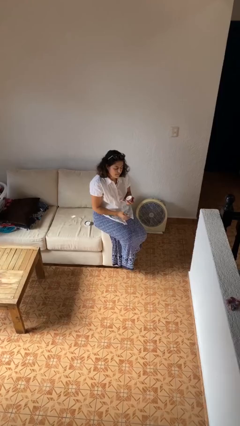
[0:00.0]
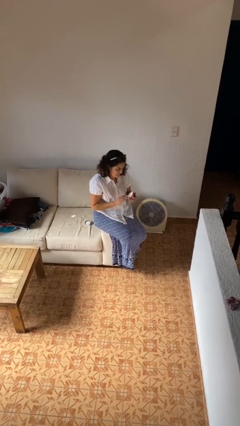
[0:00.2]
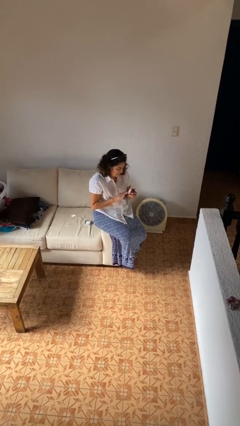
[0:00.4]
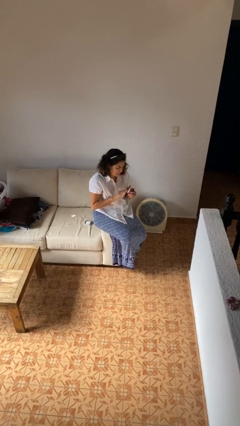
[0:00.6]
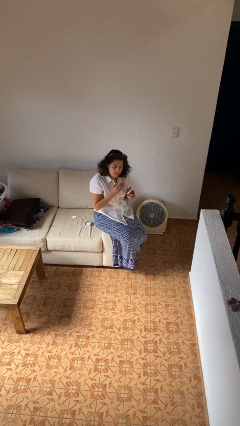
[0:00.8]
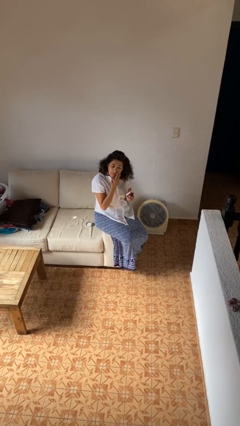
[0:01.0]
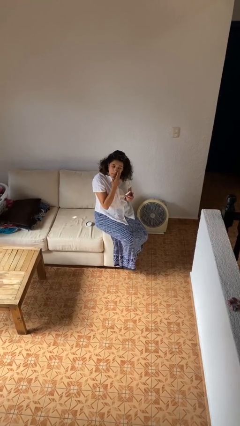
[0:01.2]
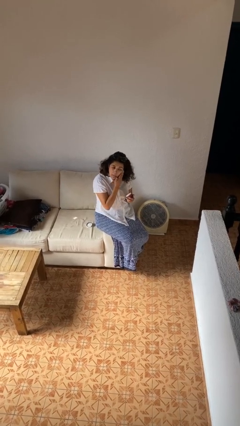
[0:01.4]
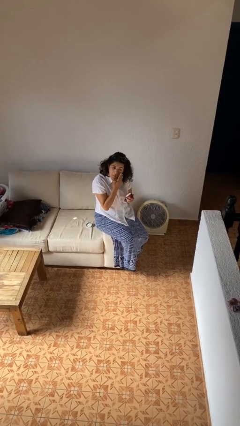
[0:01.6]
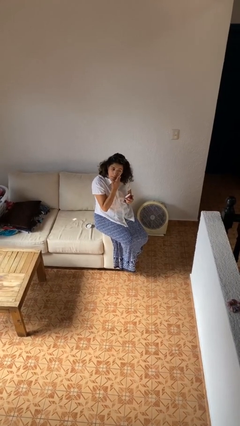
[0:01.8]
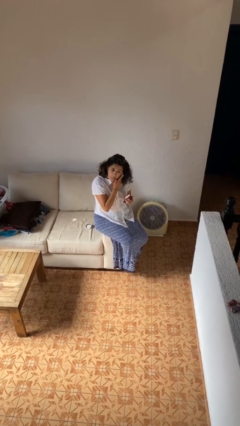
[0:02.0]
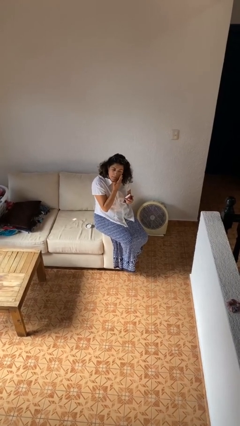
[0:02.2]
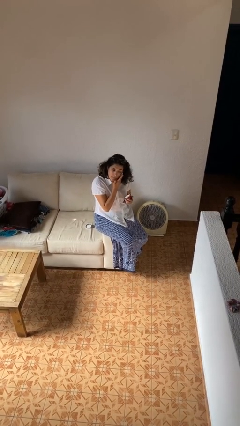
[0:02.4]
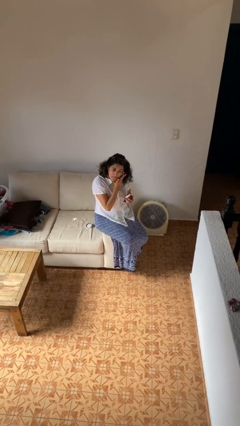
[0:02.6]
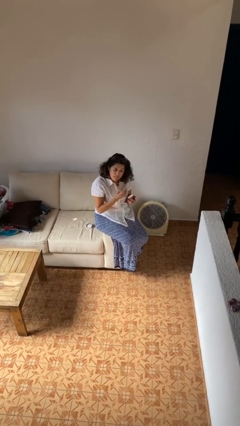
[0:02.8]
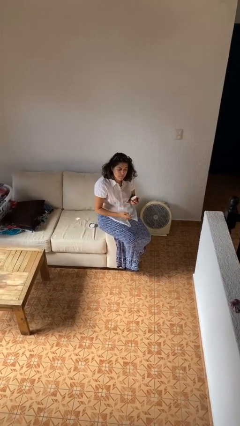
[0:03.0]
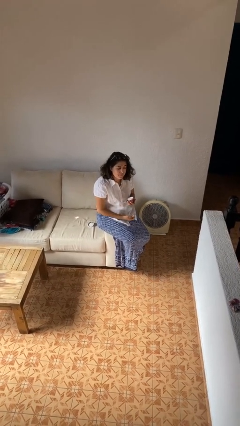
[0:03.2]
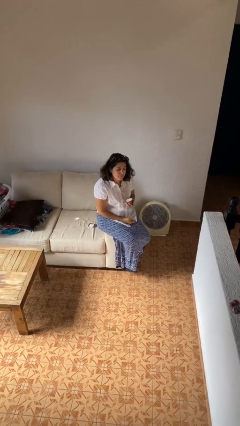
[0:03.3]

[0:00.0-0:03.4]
person applies facial moisturizer

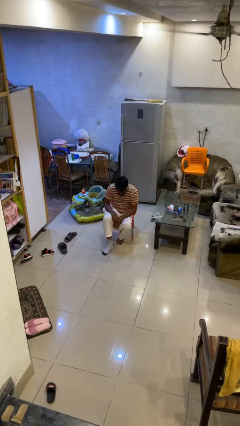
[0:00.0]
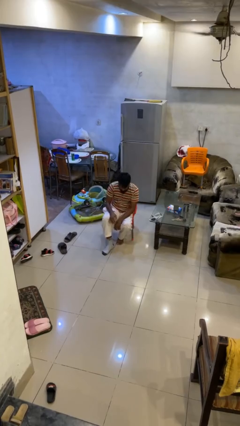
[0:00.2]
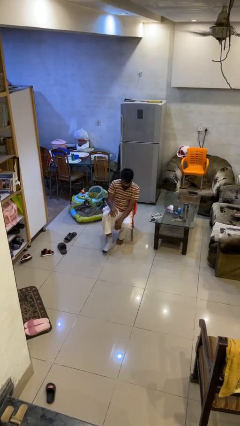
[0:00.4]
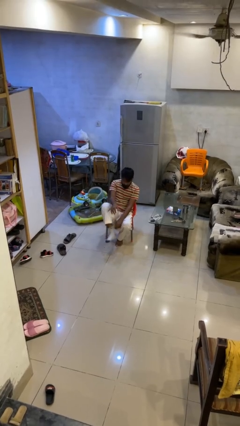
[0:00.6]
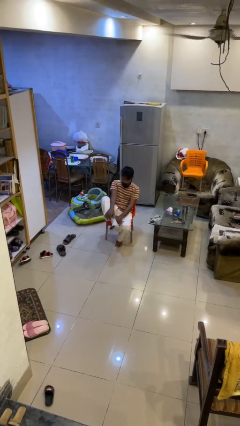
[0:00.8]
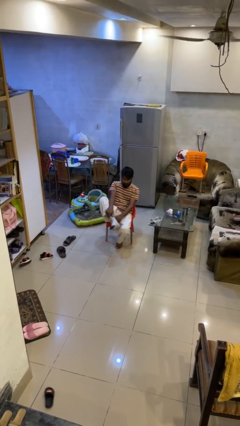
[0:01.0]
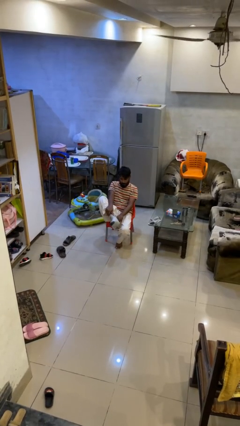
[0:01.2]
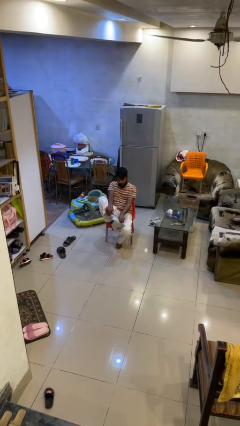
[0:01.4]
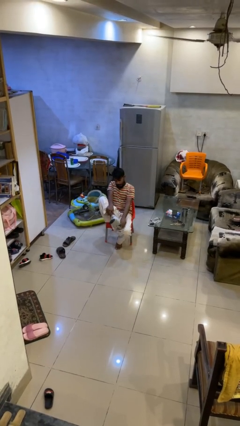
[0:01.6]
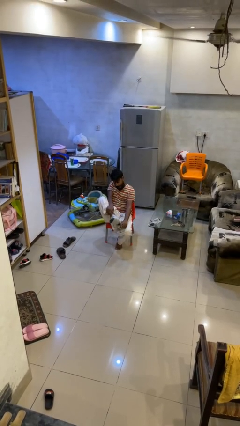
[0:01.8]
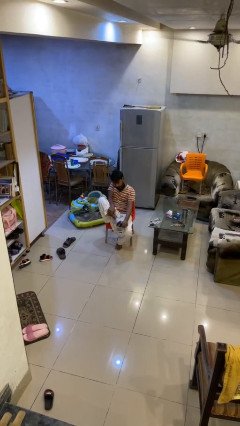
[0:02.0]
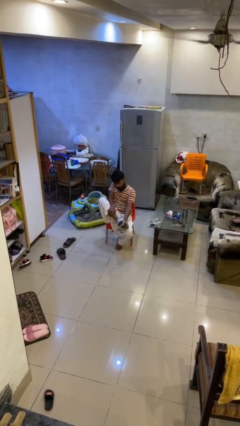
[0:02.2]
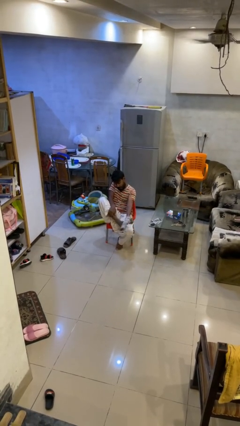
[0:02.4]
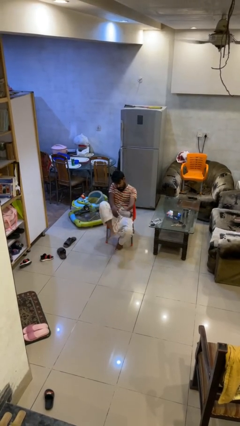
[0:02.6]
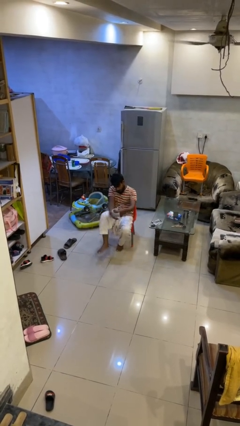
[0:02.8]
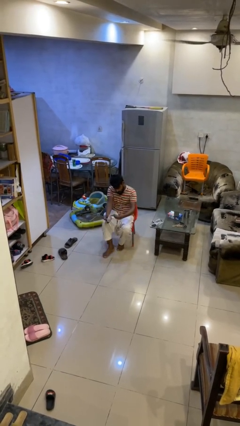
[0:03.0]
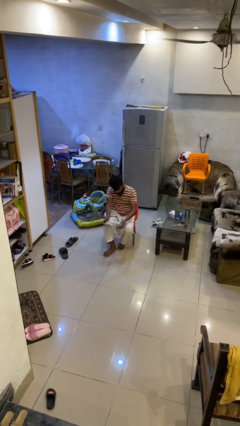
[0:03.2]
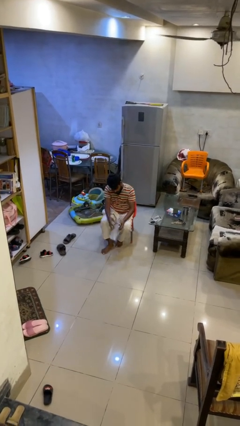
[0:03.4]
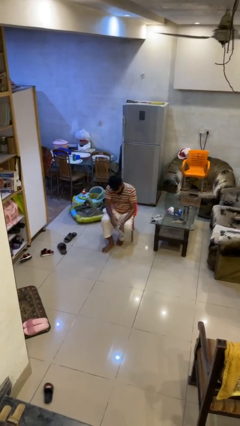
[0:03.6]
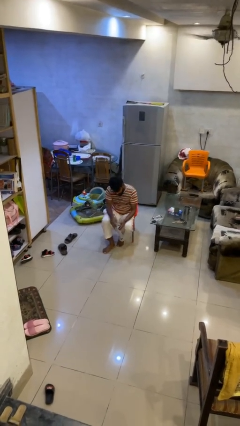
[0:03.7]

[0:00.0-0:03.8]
person takes off socks

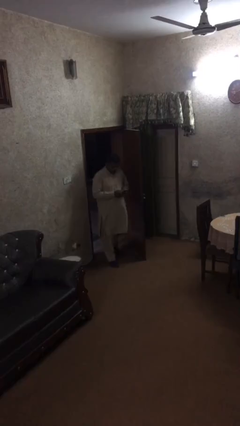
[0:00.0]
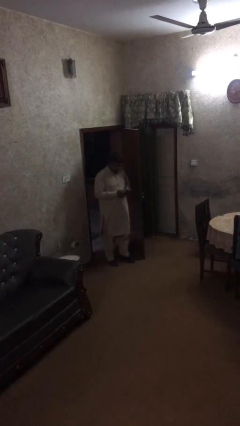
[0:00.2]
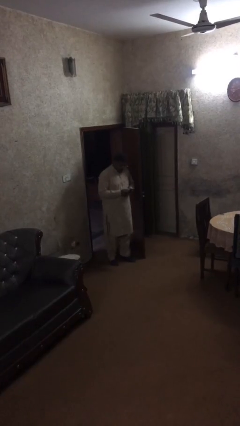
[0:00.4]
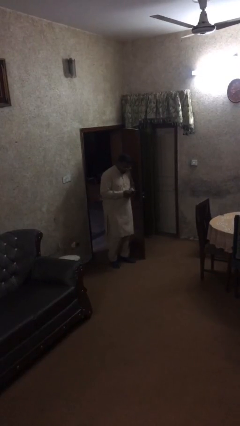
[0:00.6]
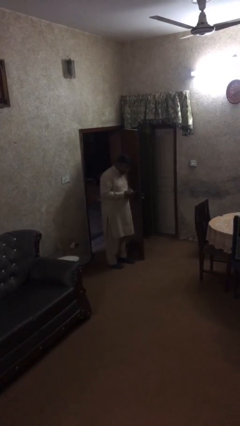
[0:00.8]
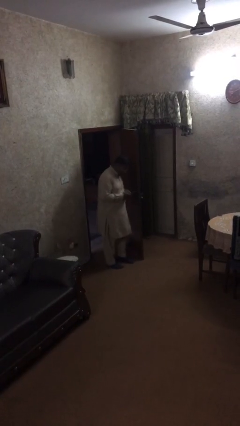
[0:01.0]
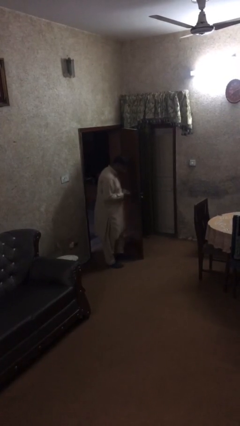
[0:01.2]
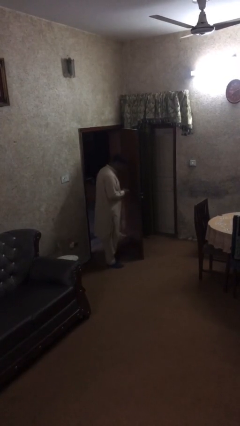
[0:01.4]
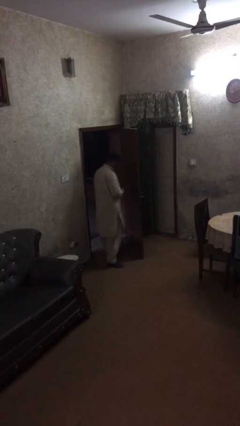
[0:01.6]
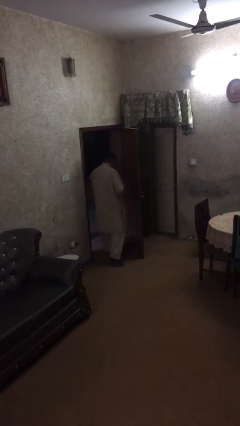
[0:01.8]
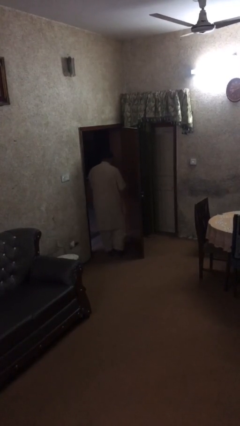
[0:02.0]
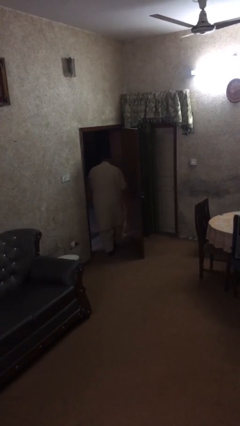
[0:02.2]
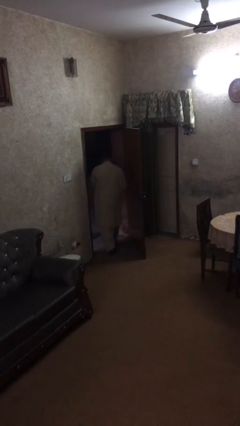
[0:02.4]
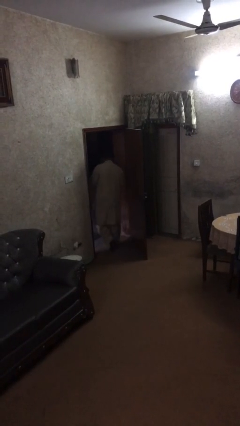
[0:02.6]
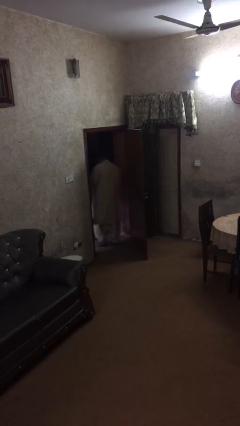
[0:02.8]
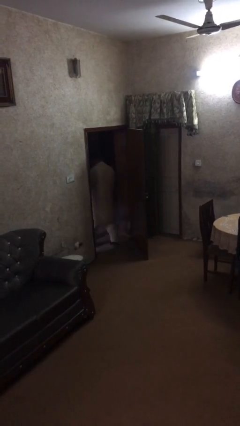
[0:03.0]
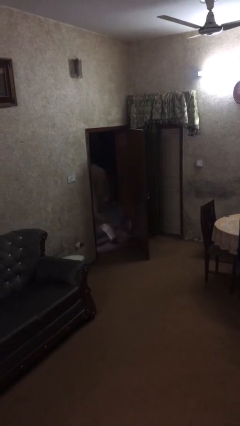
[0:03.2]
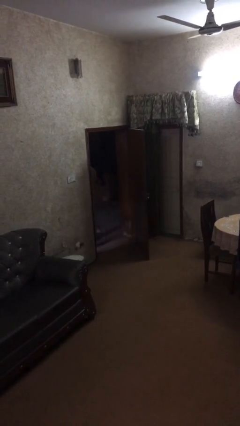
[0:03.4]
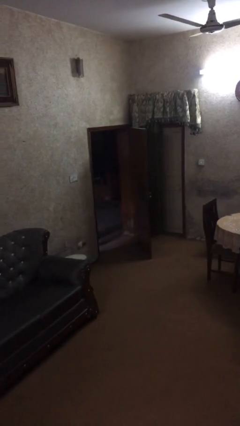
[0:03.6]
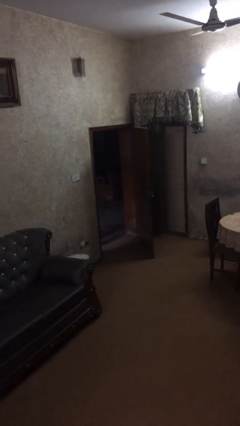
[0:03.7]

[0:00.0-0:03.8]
person exits scene through structure

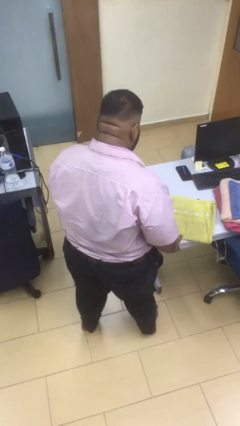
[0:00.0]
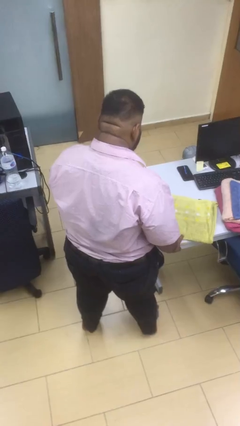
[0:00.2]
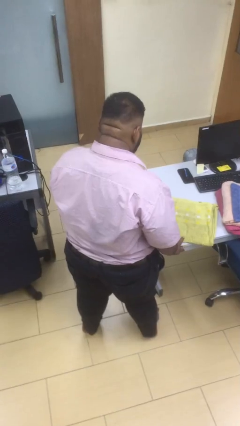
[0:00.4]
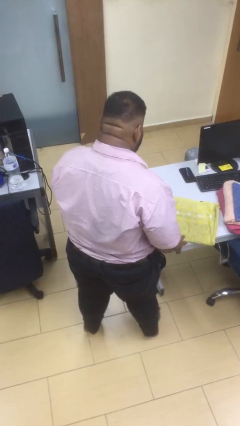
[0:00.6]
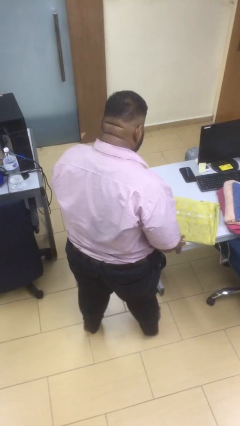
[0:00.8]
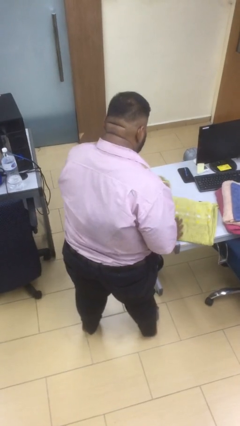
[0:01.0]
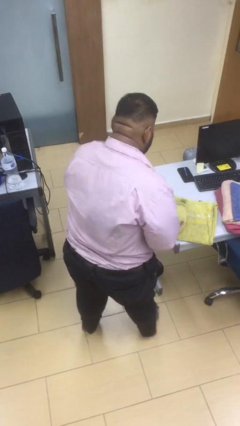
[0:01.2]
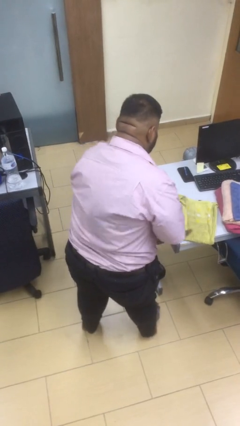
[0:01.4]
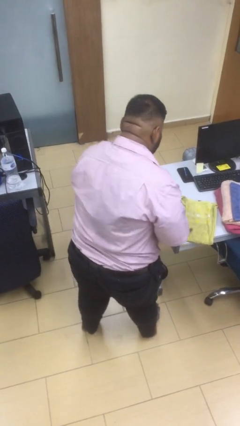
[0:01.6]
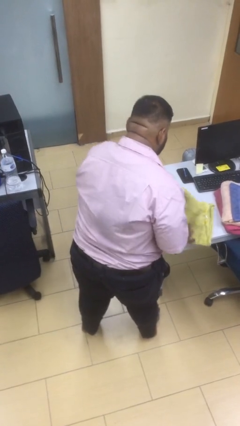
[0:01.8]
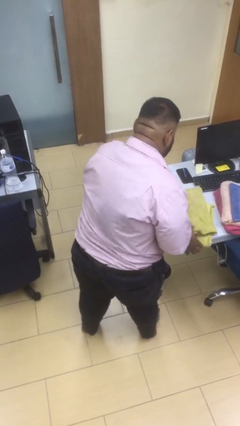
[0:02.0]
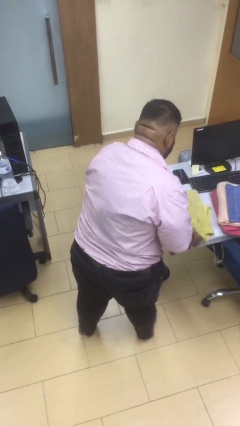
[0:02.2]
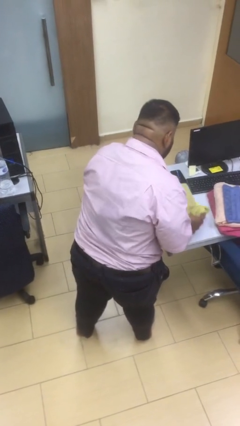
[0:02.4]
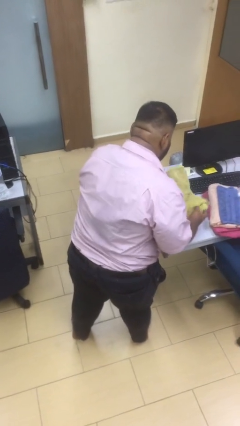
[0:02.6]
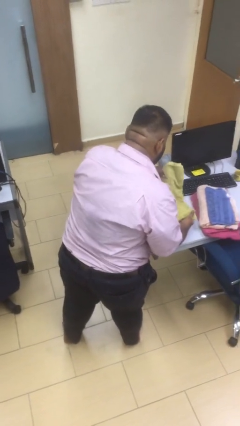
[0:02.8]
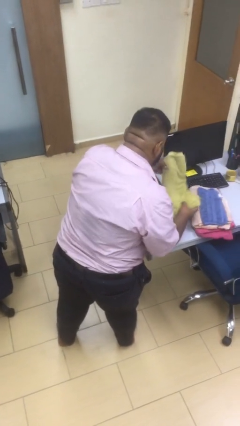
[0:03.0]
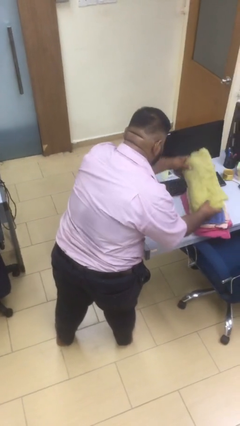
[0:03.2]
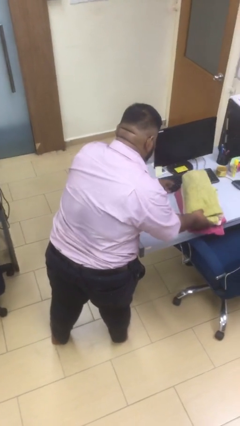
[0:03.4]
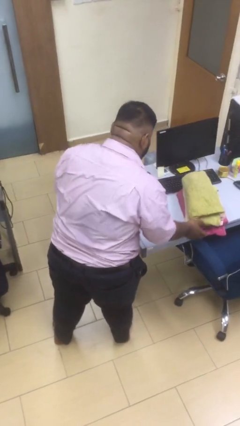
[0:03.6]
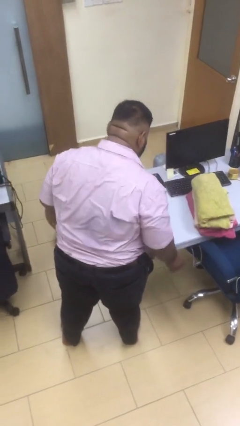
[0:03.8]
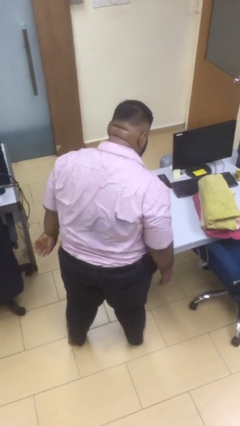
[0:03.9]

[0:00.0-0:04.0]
person folds towel

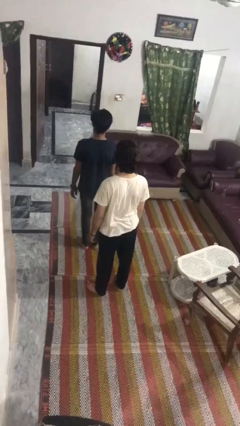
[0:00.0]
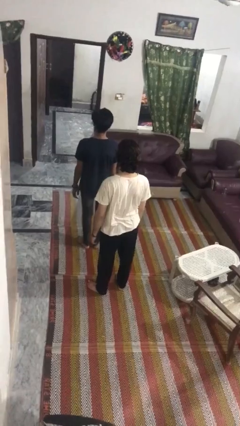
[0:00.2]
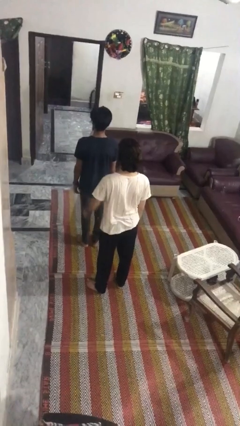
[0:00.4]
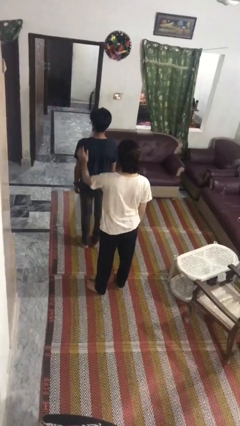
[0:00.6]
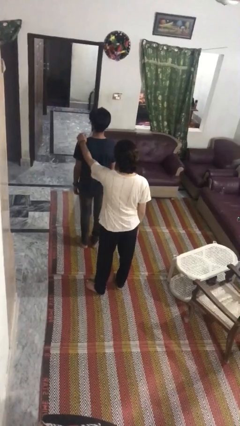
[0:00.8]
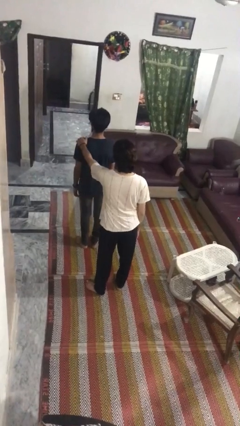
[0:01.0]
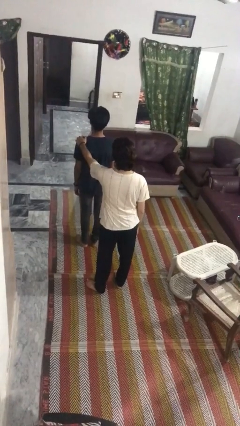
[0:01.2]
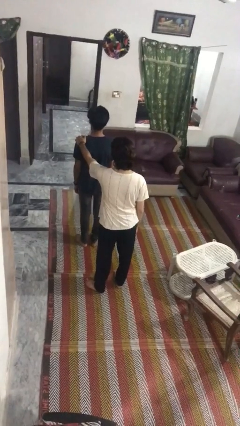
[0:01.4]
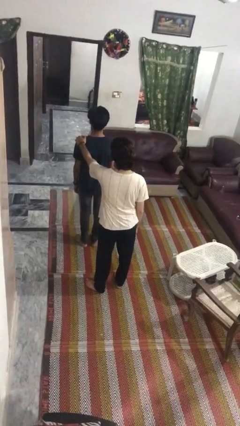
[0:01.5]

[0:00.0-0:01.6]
person grabs person by shoulder

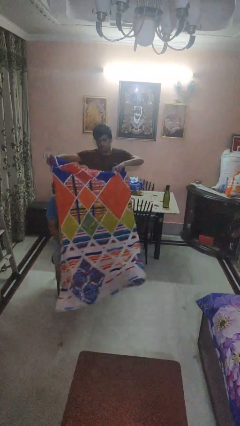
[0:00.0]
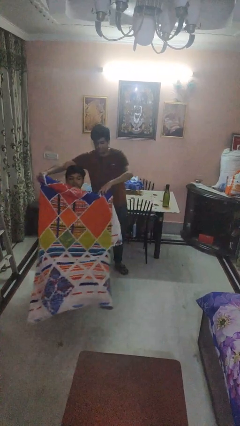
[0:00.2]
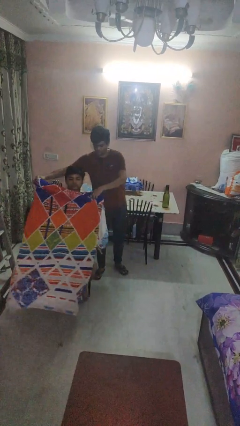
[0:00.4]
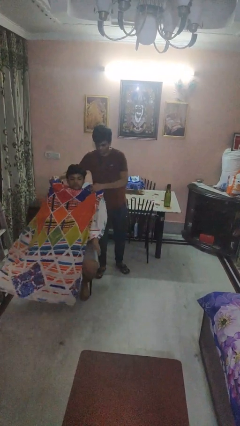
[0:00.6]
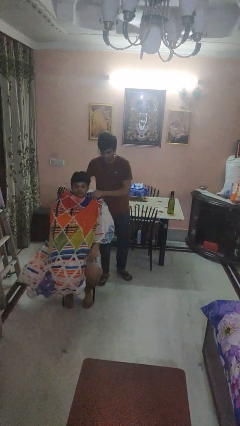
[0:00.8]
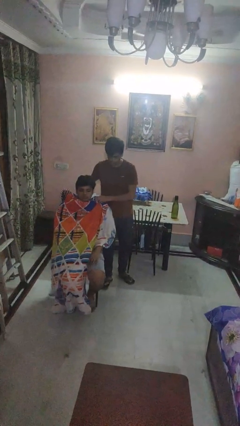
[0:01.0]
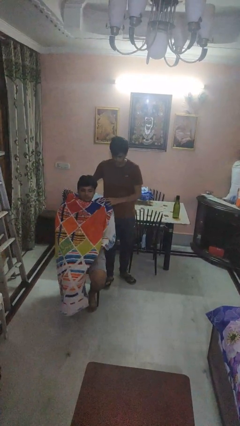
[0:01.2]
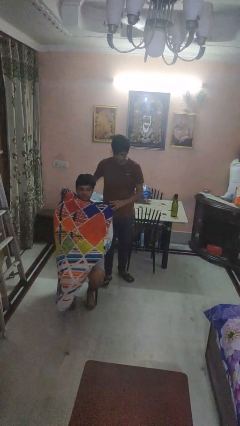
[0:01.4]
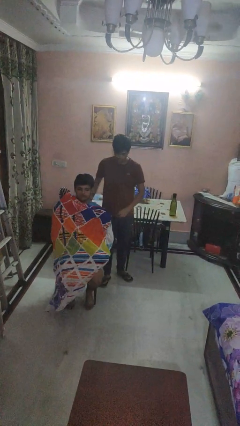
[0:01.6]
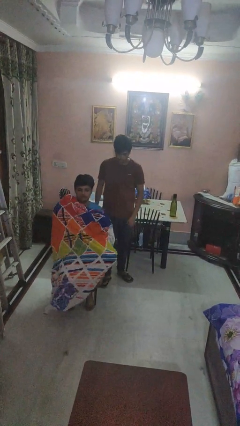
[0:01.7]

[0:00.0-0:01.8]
person covers friend with blanket
